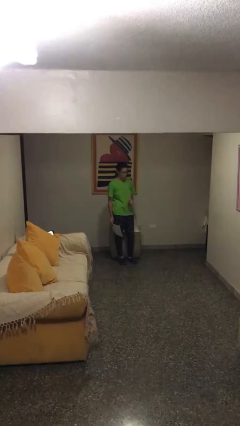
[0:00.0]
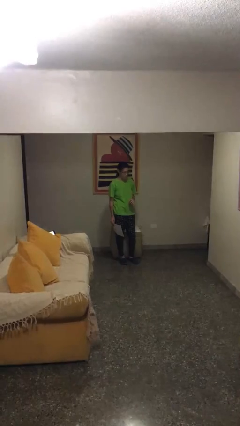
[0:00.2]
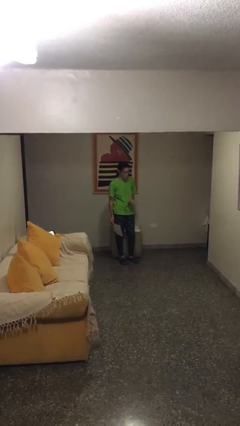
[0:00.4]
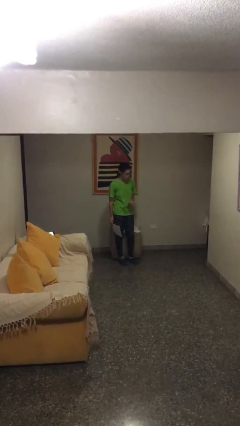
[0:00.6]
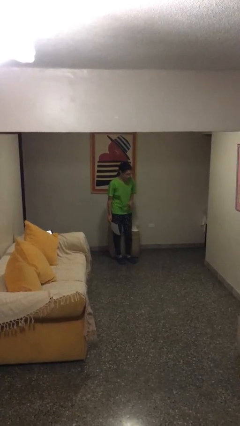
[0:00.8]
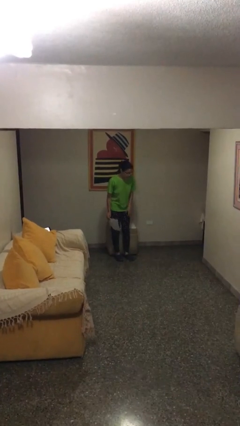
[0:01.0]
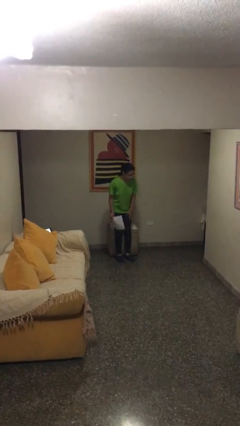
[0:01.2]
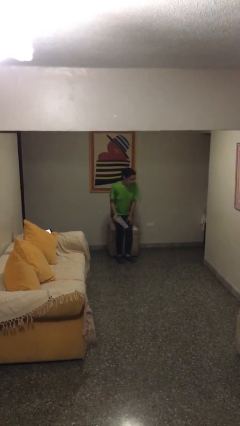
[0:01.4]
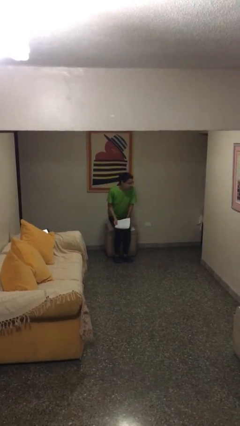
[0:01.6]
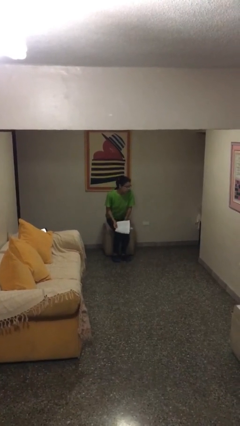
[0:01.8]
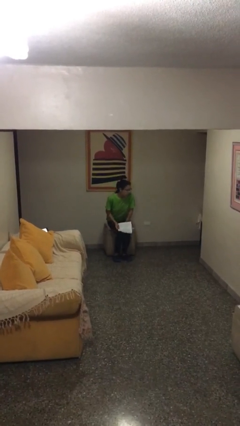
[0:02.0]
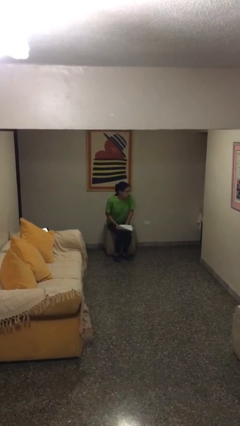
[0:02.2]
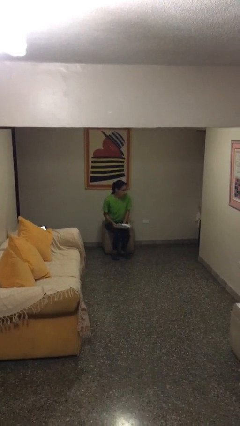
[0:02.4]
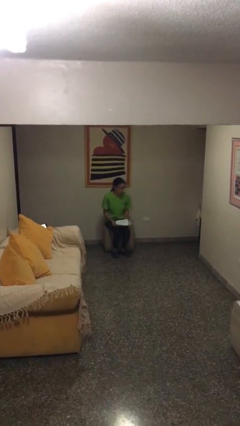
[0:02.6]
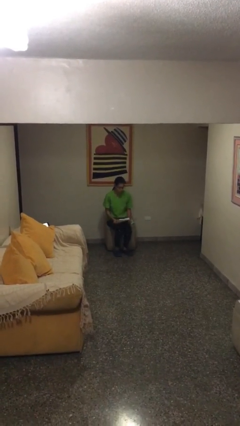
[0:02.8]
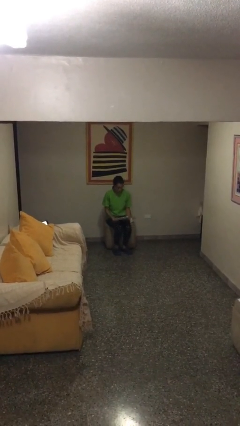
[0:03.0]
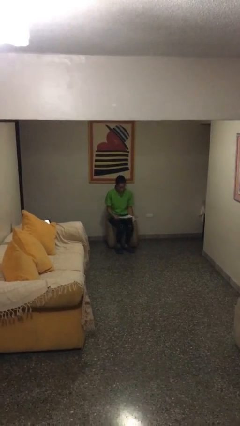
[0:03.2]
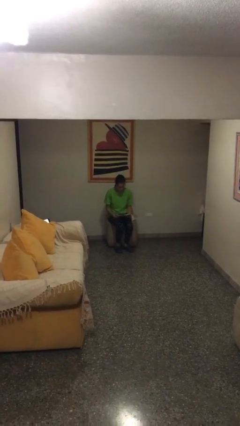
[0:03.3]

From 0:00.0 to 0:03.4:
person sits down

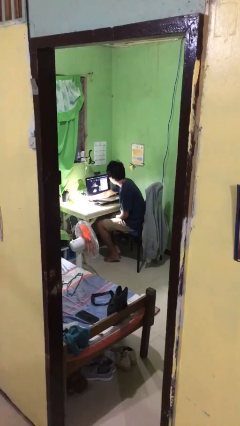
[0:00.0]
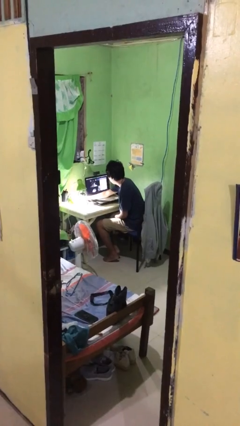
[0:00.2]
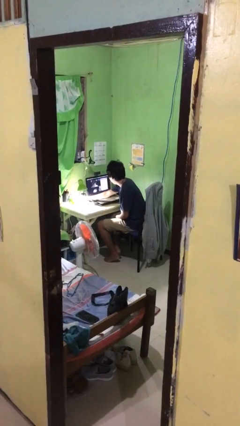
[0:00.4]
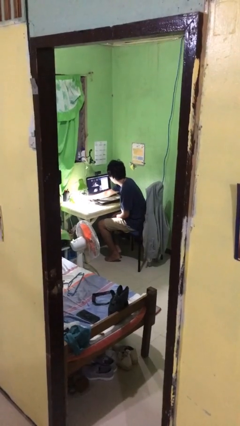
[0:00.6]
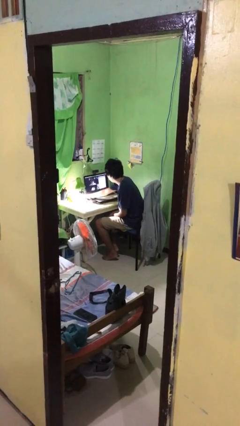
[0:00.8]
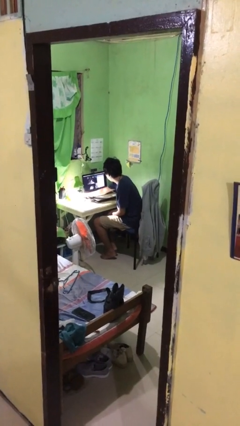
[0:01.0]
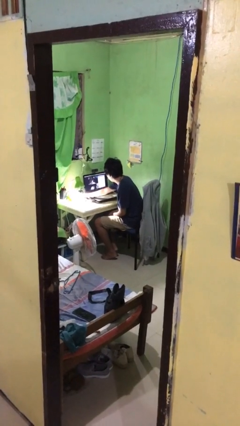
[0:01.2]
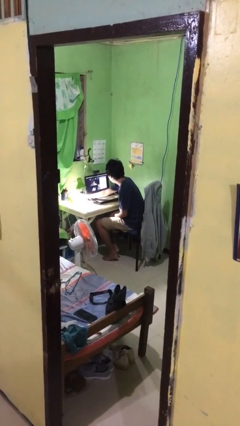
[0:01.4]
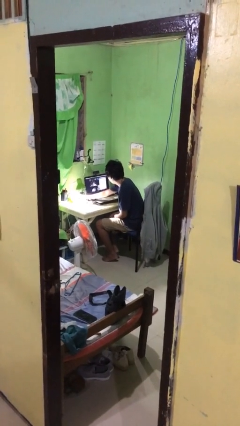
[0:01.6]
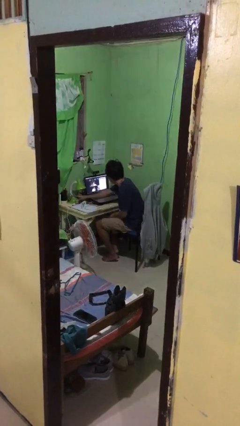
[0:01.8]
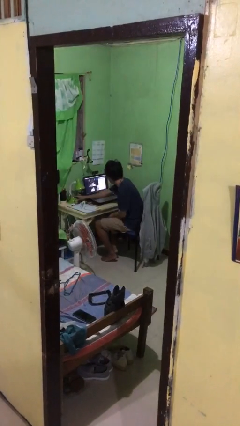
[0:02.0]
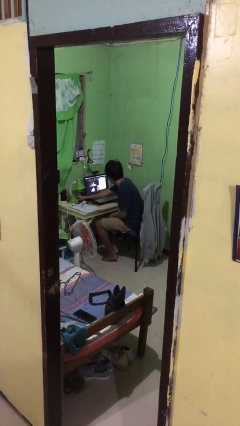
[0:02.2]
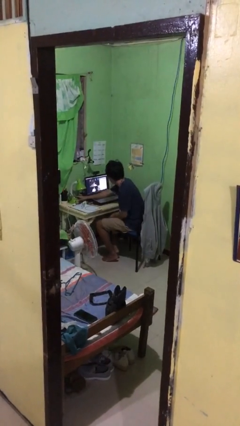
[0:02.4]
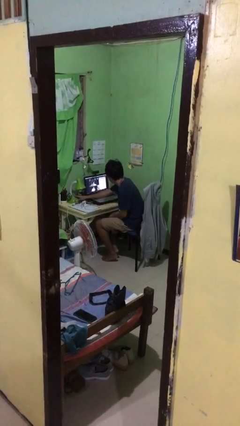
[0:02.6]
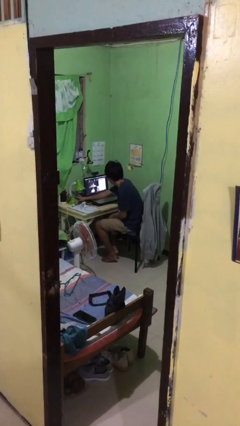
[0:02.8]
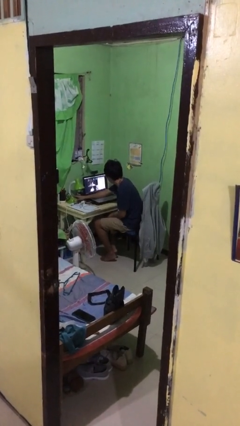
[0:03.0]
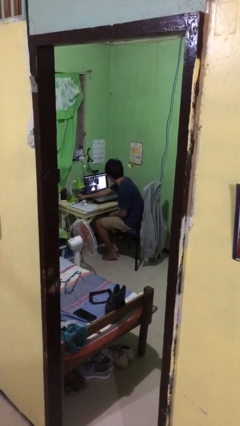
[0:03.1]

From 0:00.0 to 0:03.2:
person turns off lamp

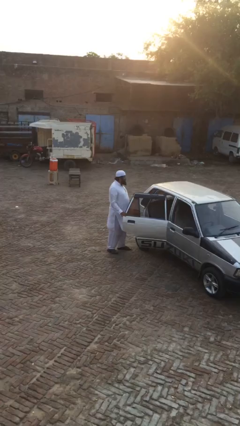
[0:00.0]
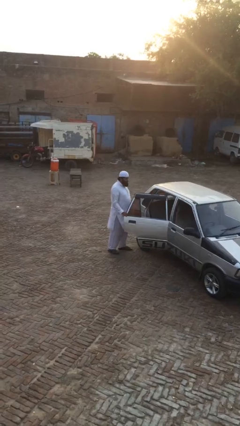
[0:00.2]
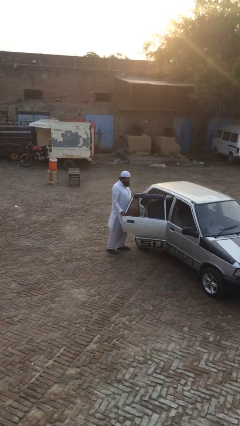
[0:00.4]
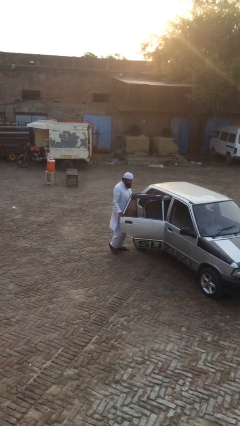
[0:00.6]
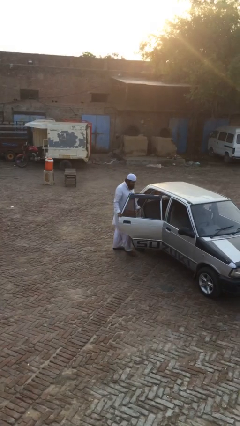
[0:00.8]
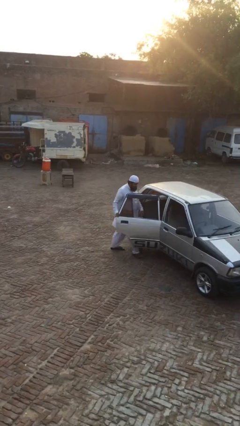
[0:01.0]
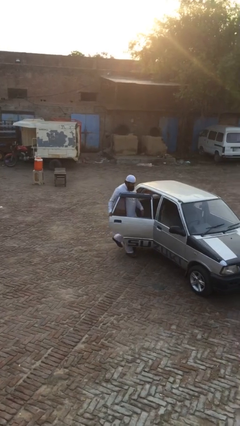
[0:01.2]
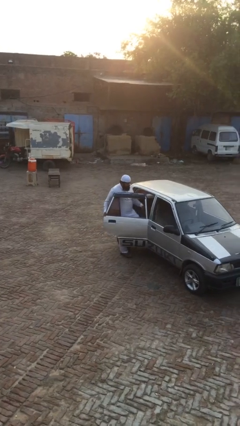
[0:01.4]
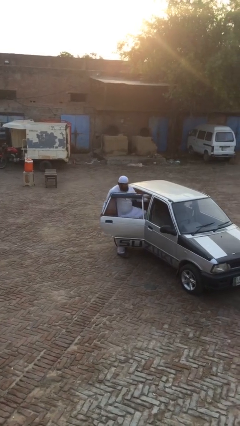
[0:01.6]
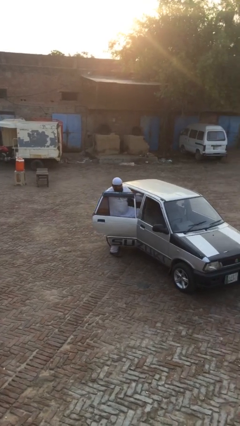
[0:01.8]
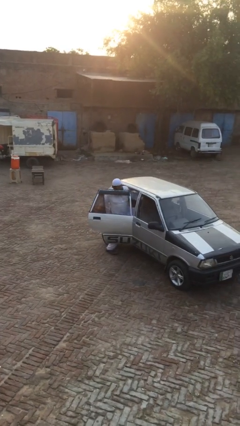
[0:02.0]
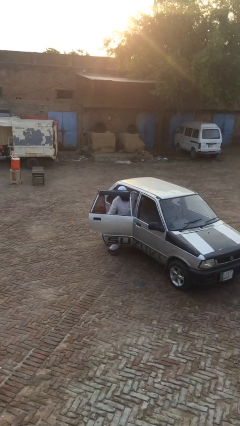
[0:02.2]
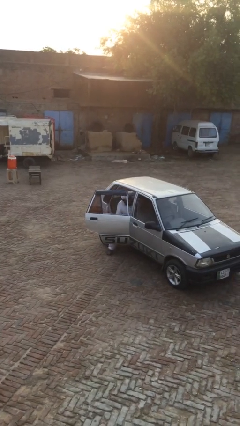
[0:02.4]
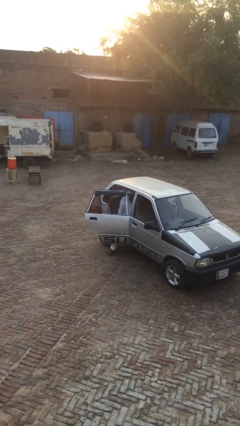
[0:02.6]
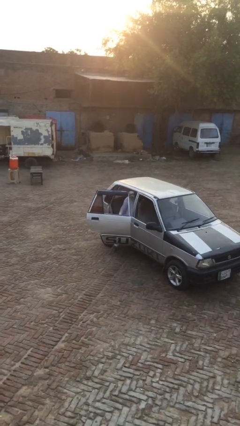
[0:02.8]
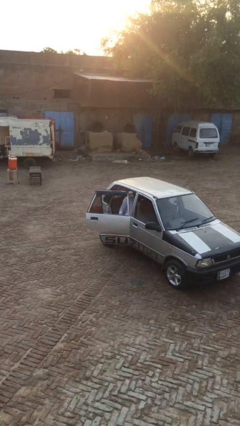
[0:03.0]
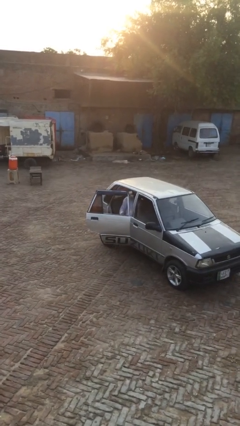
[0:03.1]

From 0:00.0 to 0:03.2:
person enters car

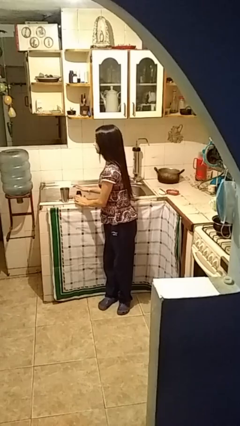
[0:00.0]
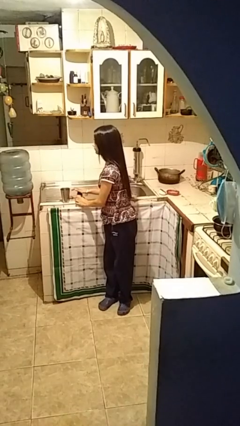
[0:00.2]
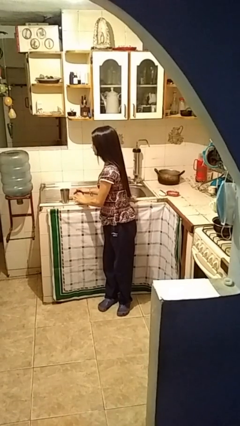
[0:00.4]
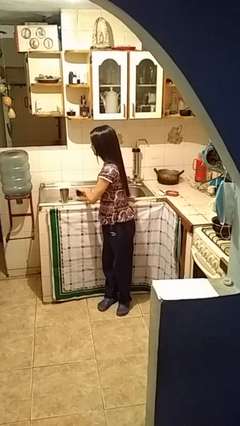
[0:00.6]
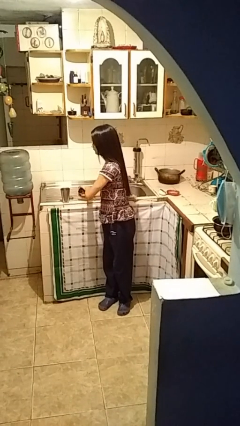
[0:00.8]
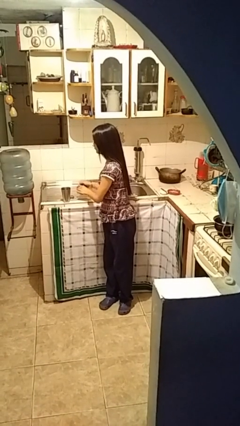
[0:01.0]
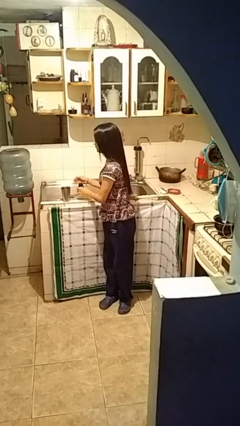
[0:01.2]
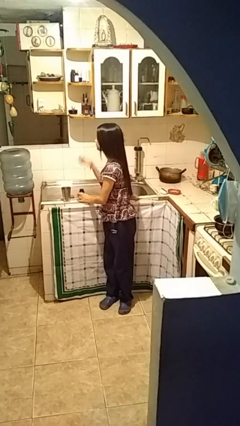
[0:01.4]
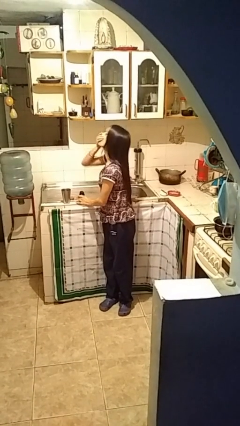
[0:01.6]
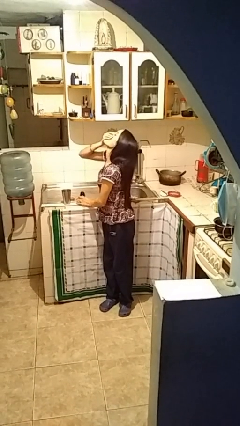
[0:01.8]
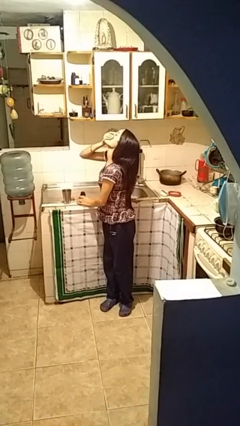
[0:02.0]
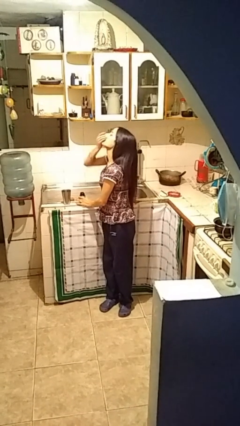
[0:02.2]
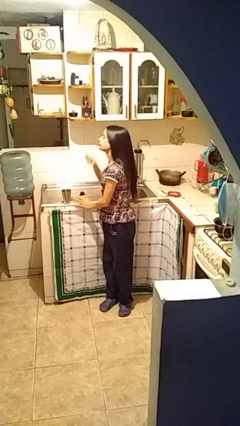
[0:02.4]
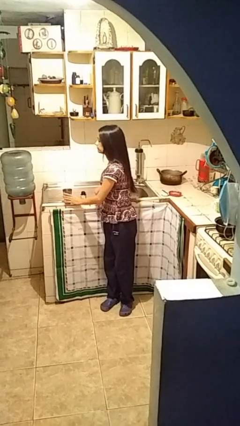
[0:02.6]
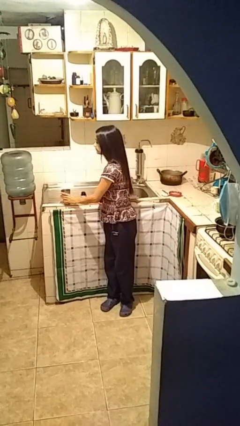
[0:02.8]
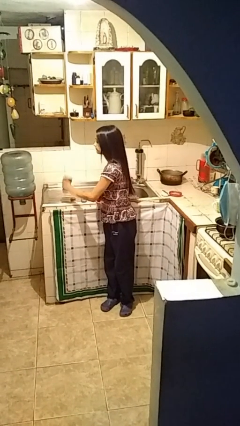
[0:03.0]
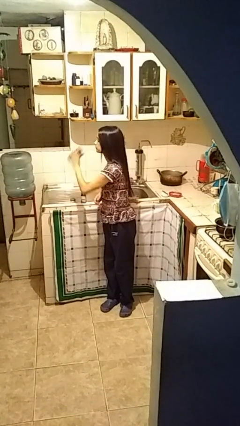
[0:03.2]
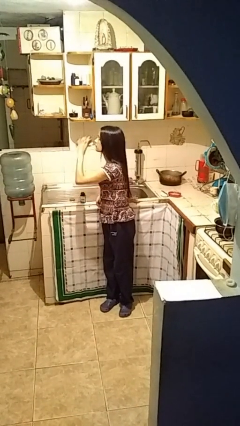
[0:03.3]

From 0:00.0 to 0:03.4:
person takes medicine pills

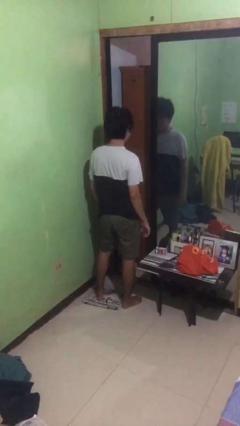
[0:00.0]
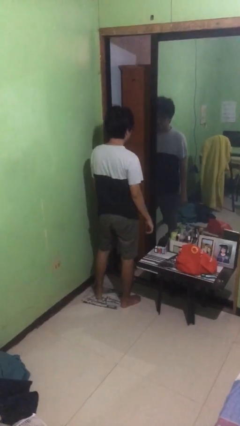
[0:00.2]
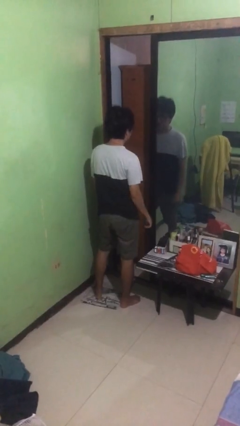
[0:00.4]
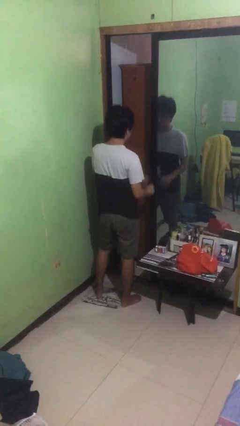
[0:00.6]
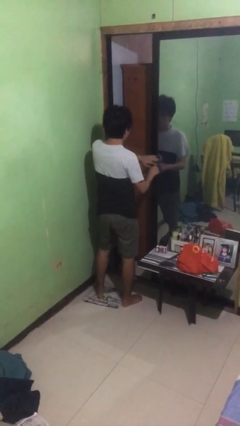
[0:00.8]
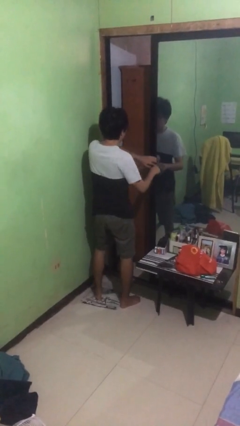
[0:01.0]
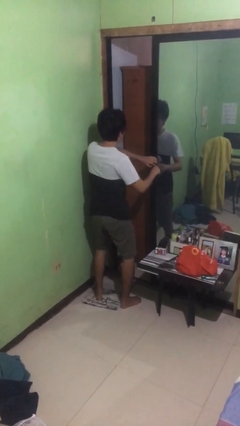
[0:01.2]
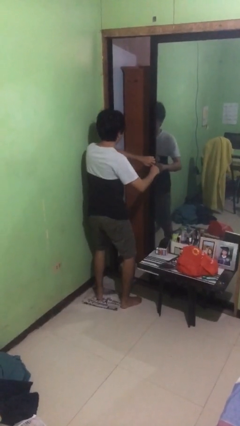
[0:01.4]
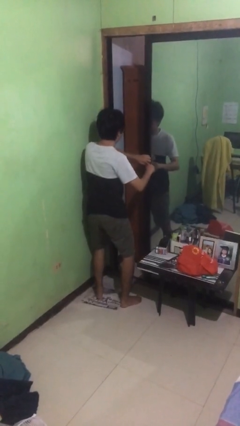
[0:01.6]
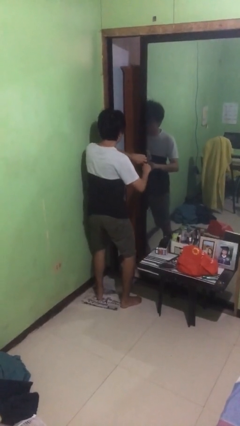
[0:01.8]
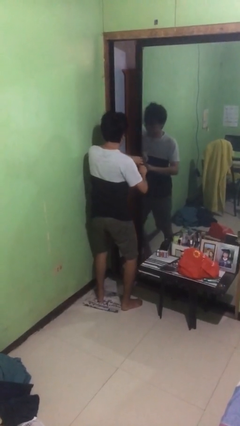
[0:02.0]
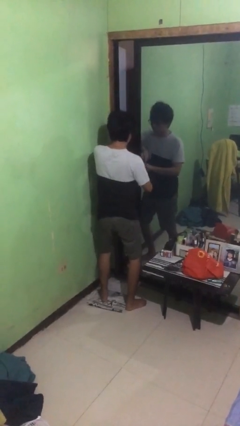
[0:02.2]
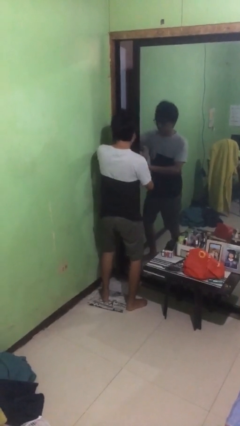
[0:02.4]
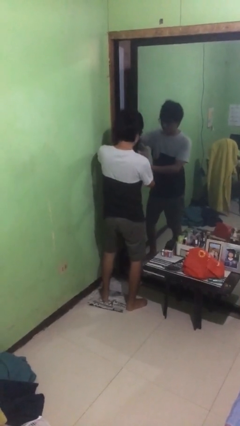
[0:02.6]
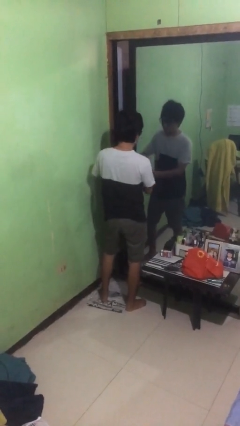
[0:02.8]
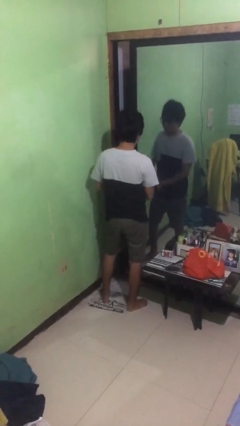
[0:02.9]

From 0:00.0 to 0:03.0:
person closes sliding door

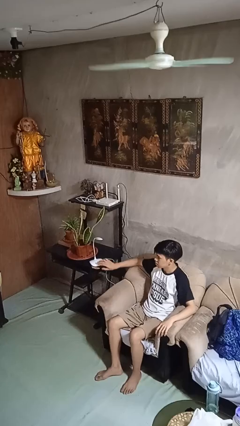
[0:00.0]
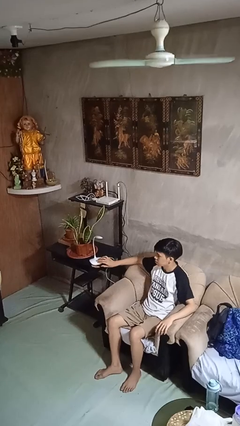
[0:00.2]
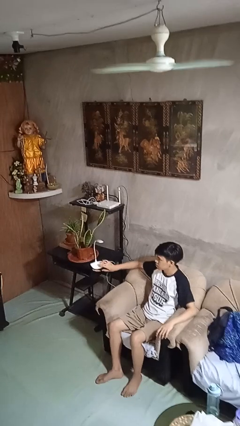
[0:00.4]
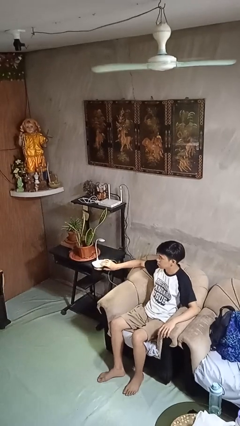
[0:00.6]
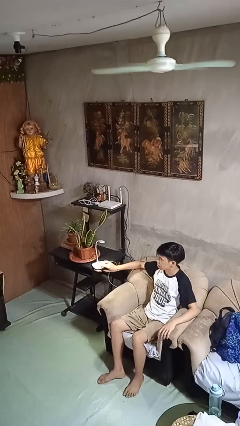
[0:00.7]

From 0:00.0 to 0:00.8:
person turns on lamp
